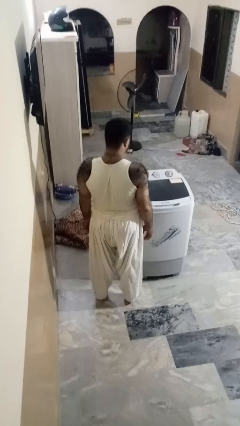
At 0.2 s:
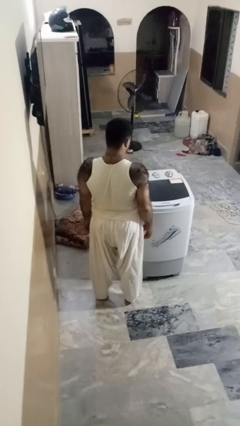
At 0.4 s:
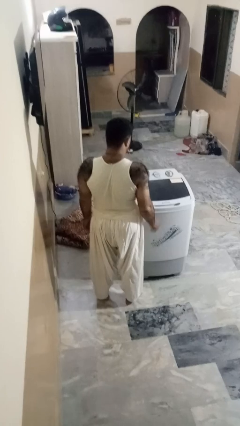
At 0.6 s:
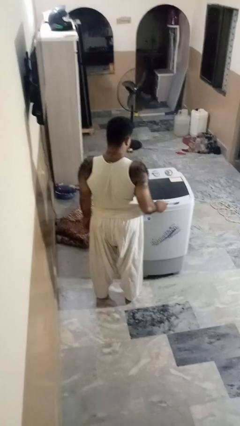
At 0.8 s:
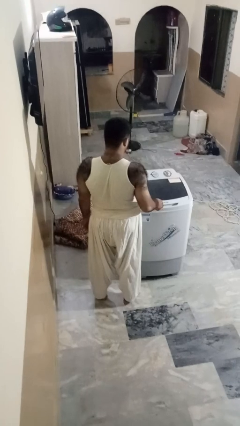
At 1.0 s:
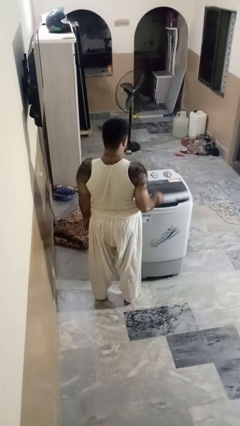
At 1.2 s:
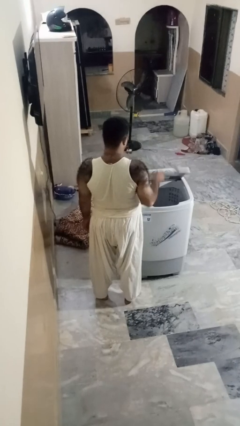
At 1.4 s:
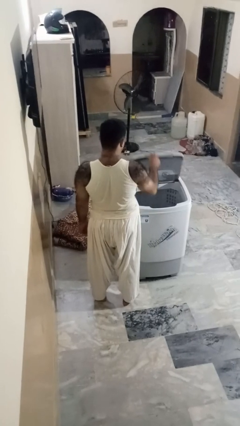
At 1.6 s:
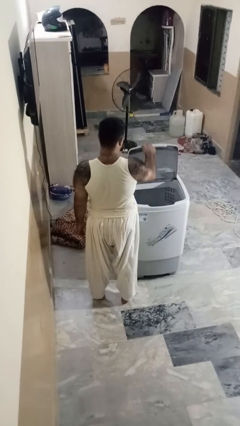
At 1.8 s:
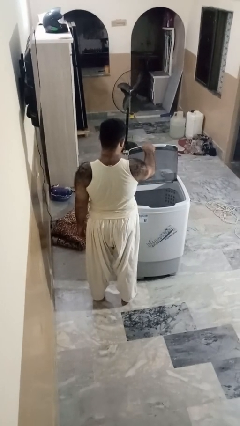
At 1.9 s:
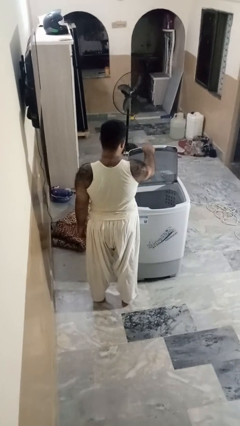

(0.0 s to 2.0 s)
person opens clothes washer

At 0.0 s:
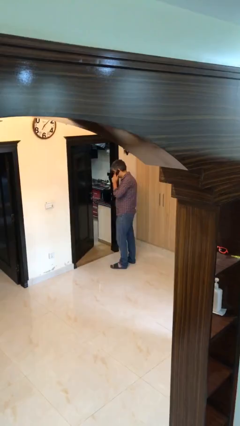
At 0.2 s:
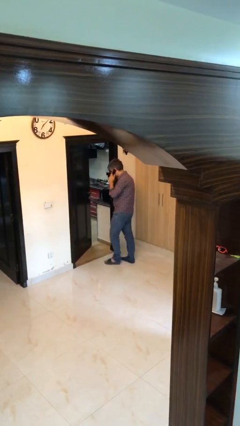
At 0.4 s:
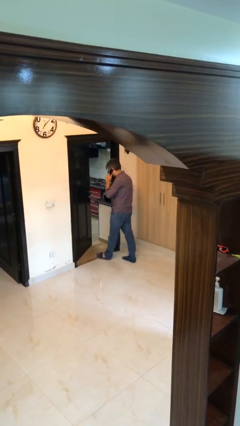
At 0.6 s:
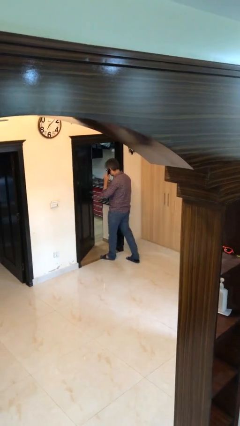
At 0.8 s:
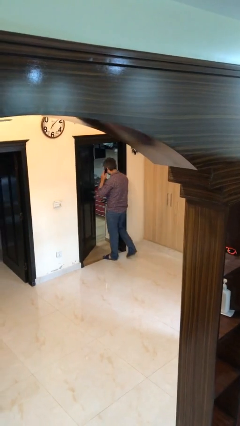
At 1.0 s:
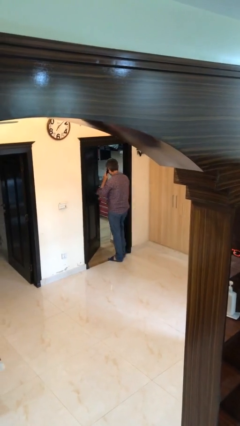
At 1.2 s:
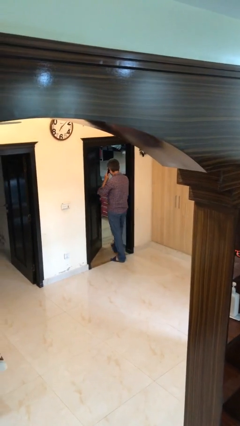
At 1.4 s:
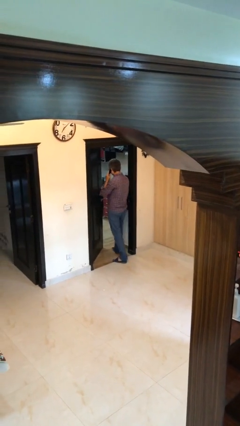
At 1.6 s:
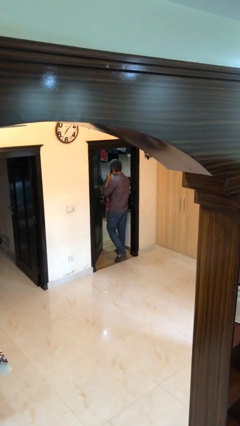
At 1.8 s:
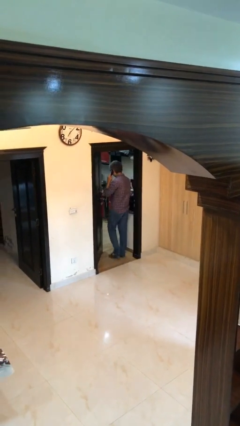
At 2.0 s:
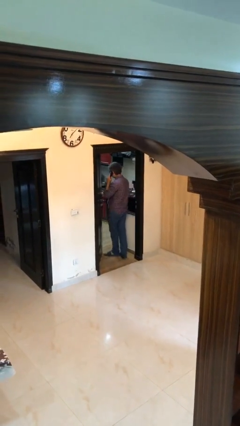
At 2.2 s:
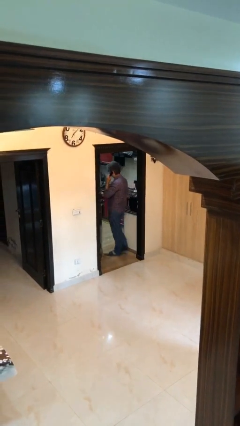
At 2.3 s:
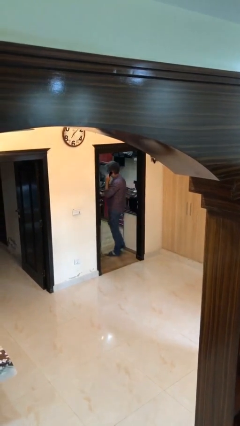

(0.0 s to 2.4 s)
person exits scene through structure

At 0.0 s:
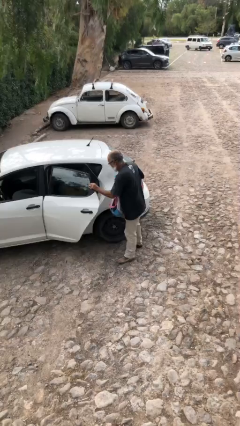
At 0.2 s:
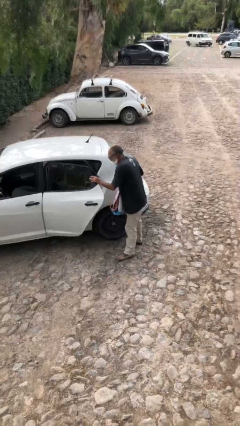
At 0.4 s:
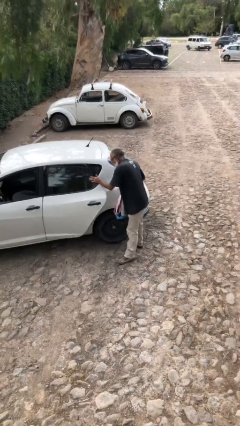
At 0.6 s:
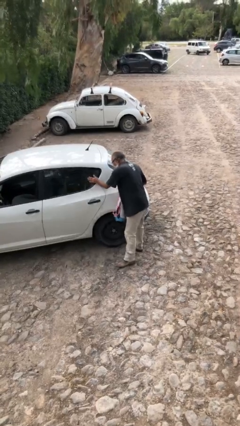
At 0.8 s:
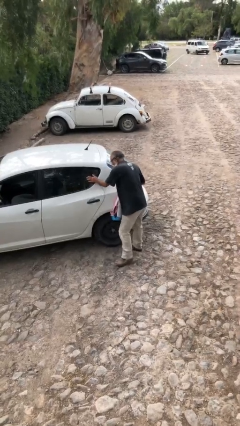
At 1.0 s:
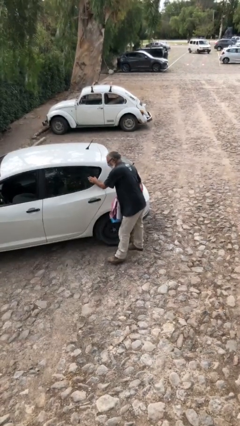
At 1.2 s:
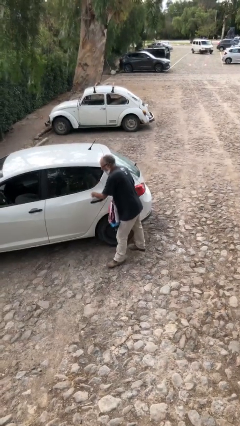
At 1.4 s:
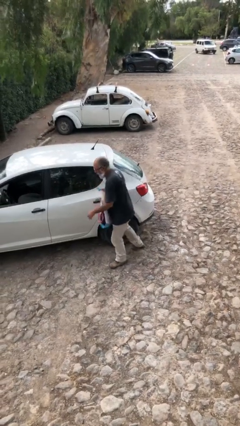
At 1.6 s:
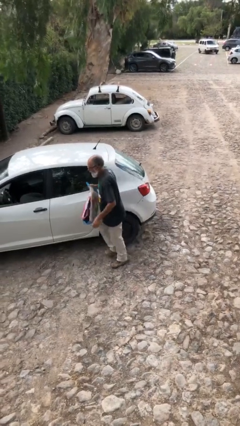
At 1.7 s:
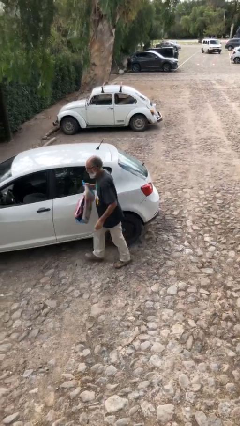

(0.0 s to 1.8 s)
person closes car door

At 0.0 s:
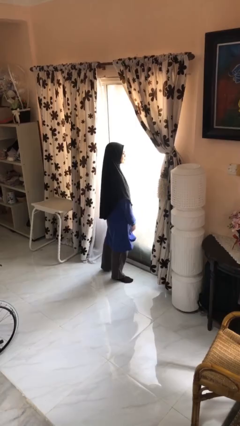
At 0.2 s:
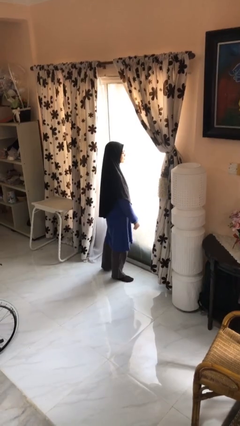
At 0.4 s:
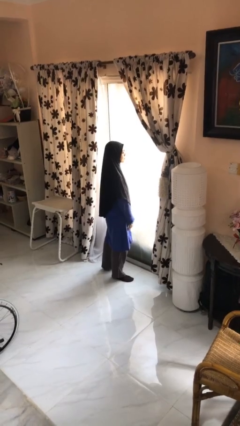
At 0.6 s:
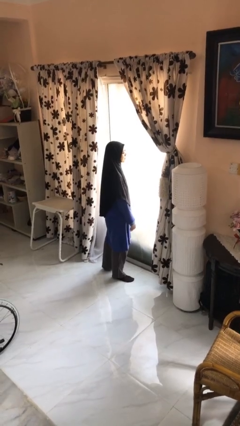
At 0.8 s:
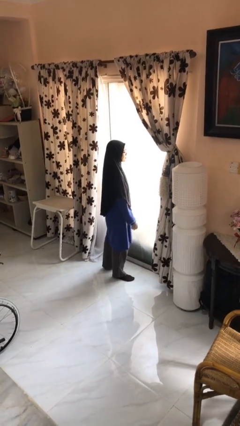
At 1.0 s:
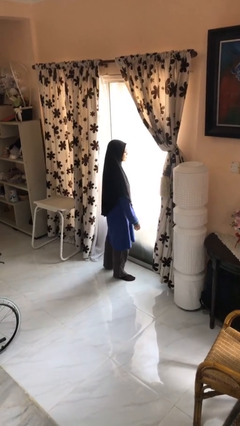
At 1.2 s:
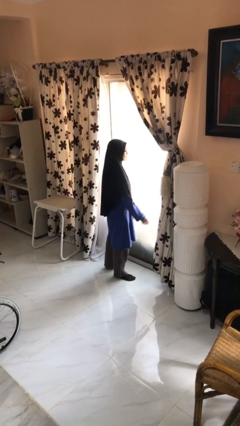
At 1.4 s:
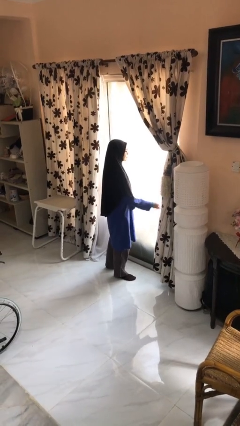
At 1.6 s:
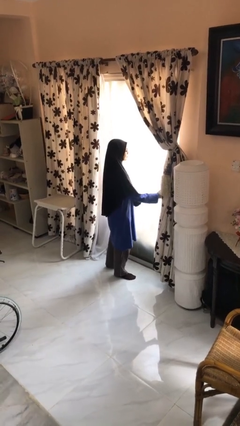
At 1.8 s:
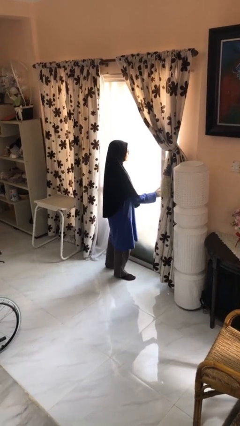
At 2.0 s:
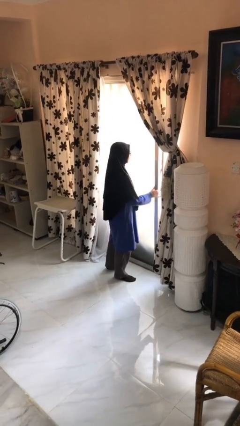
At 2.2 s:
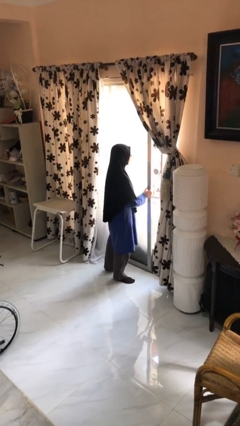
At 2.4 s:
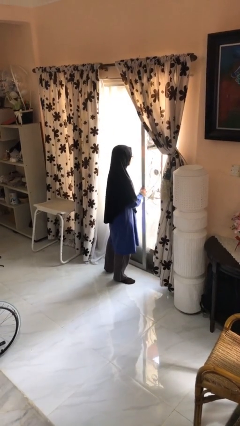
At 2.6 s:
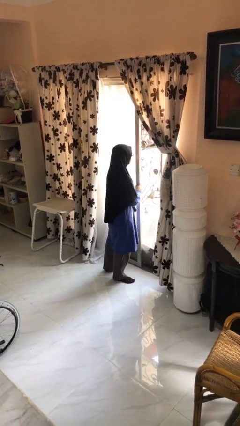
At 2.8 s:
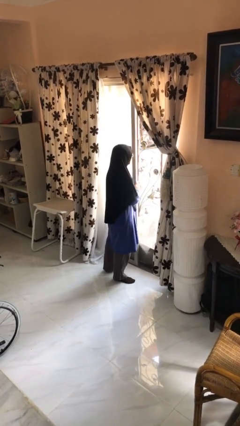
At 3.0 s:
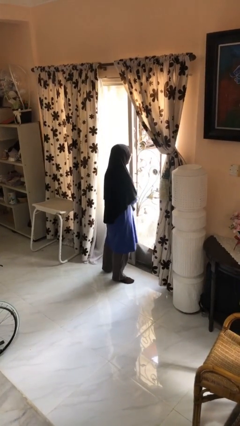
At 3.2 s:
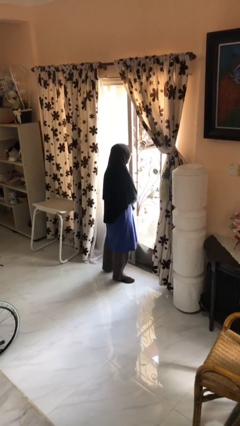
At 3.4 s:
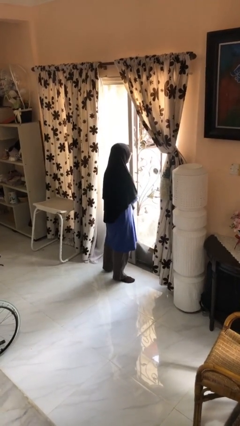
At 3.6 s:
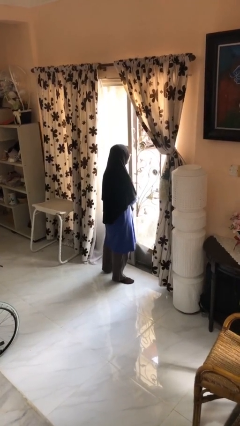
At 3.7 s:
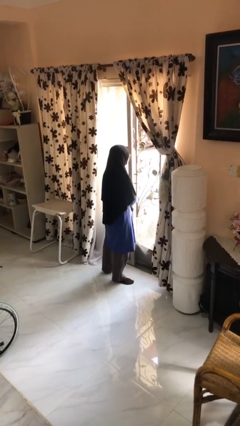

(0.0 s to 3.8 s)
person opens sliding door

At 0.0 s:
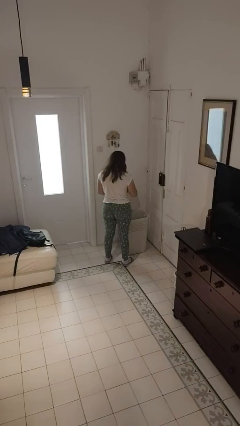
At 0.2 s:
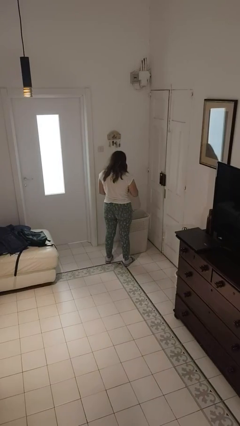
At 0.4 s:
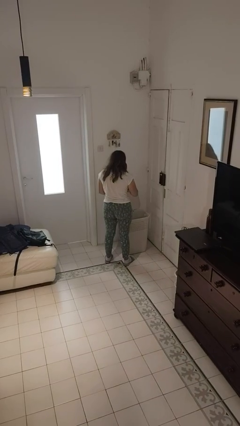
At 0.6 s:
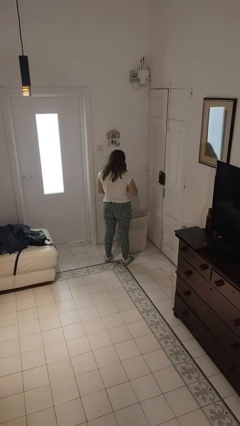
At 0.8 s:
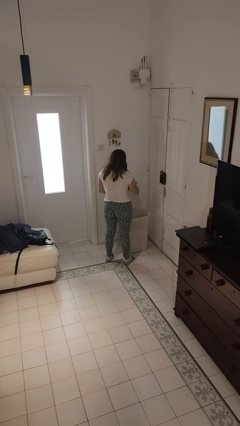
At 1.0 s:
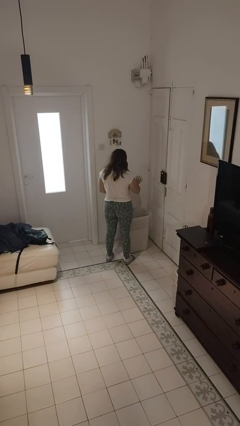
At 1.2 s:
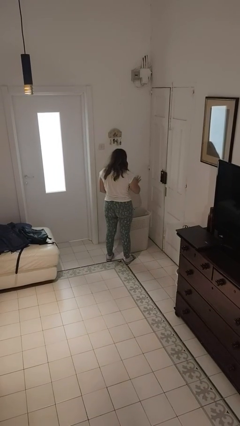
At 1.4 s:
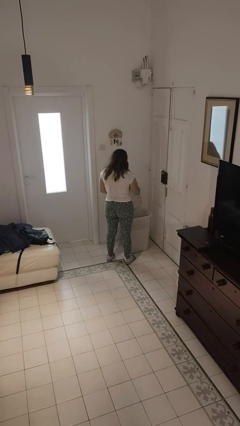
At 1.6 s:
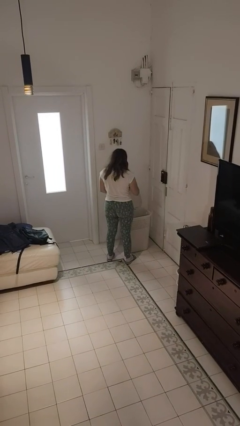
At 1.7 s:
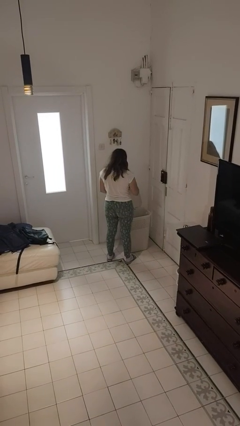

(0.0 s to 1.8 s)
person discards trash

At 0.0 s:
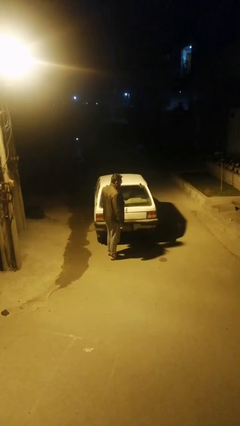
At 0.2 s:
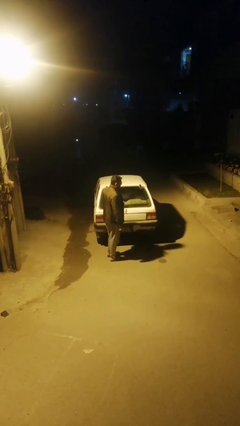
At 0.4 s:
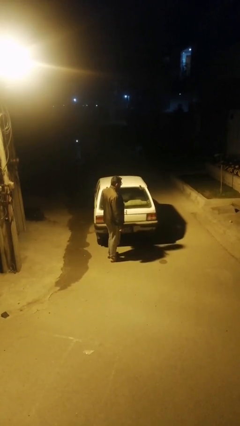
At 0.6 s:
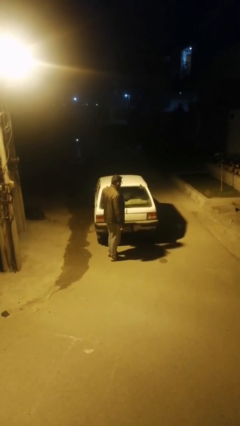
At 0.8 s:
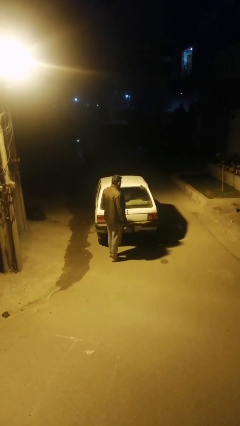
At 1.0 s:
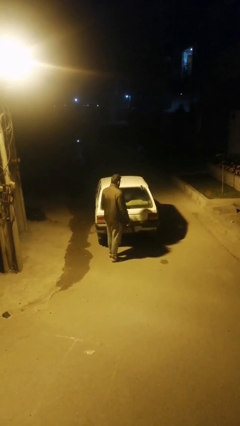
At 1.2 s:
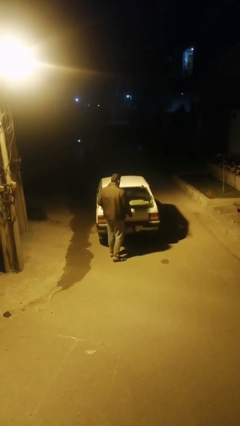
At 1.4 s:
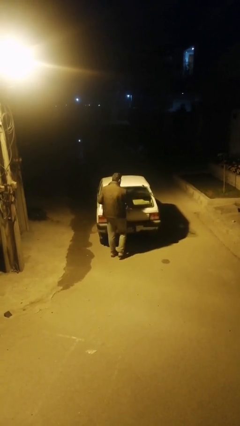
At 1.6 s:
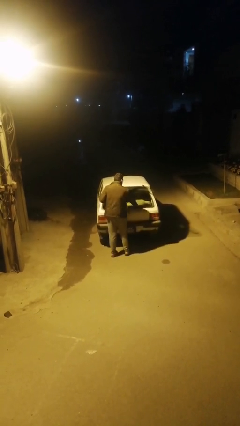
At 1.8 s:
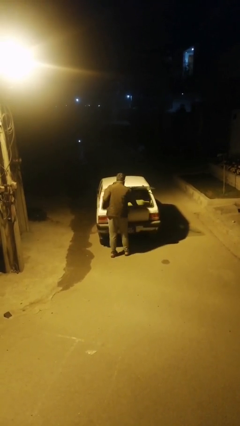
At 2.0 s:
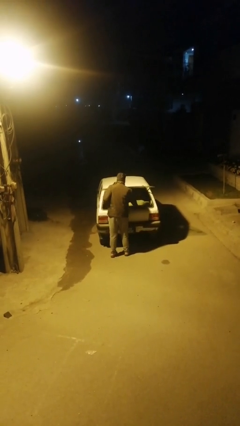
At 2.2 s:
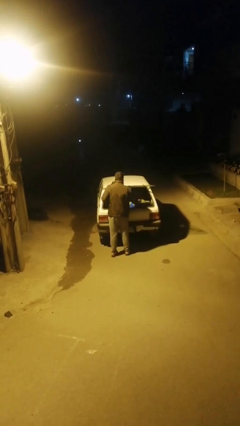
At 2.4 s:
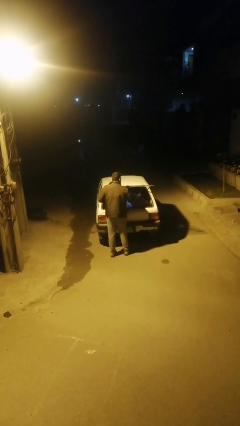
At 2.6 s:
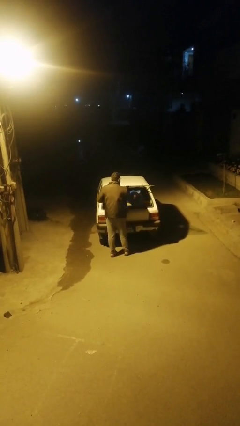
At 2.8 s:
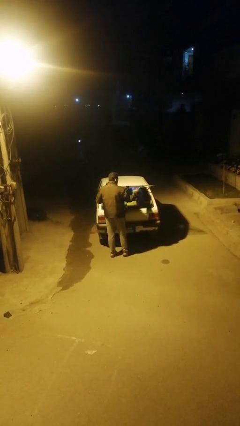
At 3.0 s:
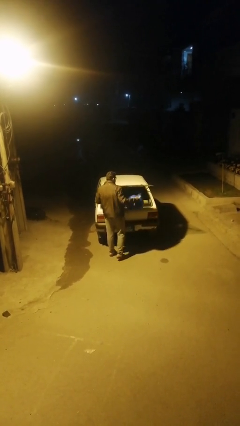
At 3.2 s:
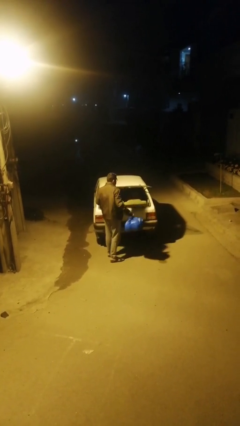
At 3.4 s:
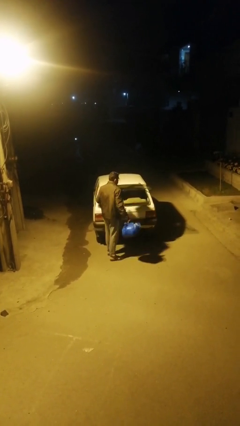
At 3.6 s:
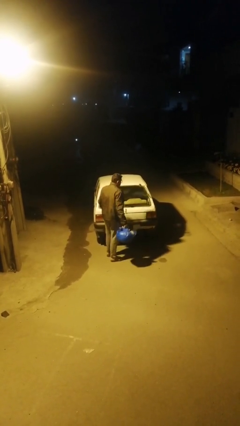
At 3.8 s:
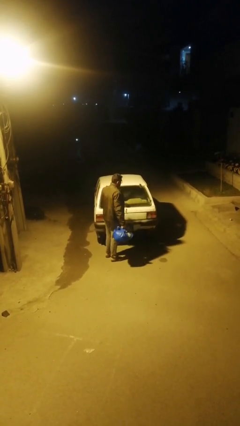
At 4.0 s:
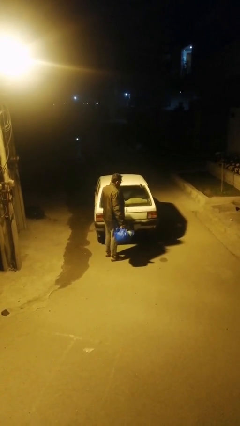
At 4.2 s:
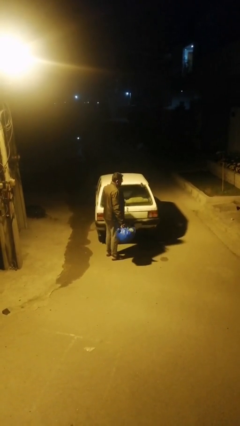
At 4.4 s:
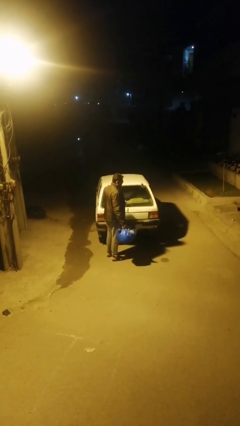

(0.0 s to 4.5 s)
person unloads car

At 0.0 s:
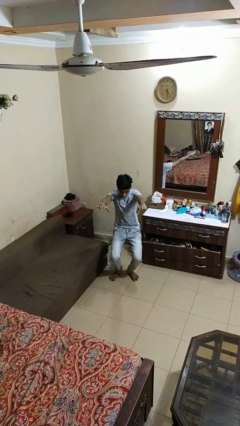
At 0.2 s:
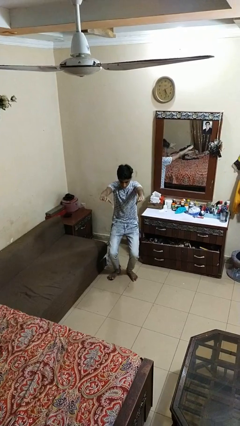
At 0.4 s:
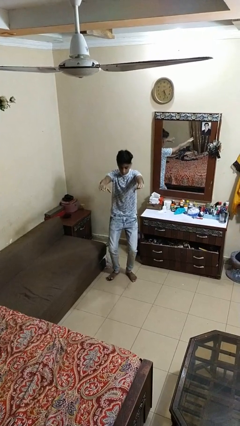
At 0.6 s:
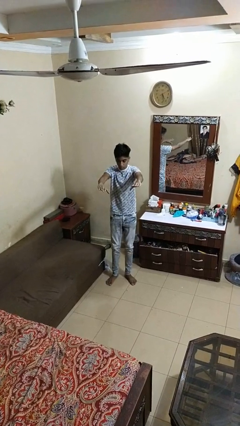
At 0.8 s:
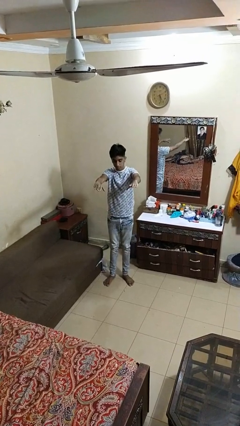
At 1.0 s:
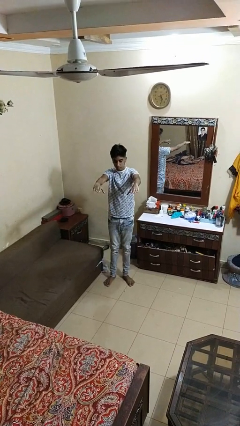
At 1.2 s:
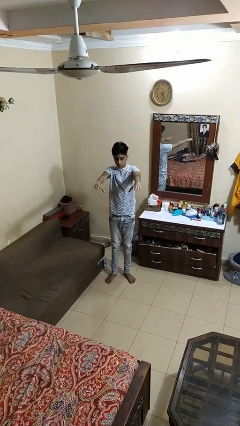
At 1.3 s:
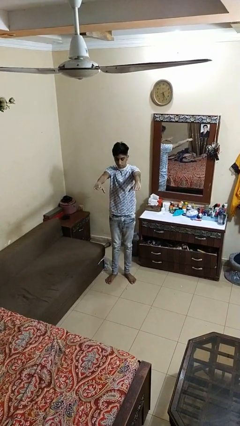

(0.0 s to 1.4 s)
person stands up
